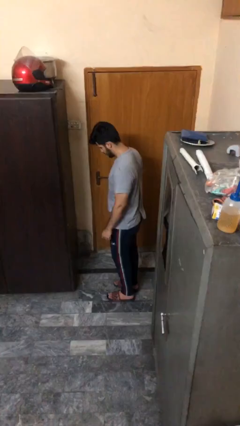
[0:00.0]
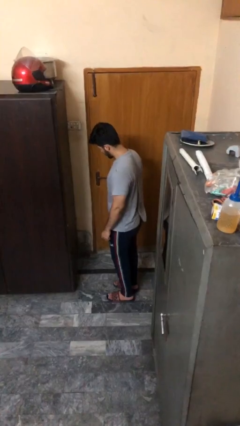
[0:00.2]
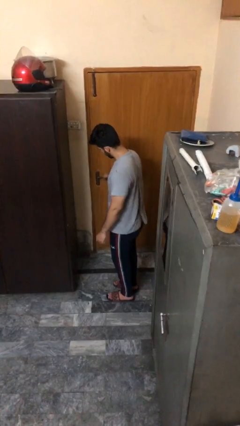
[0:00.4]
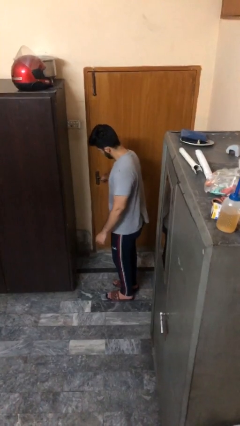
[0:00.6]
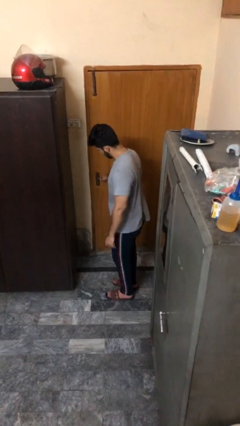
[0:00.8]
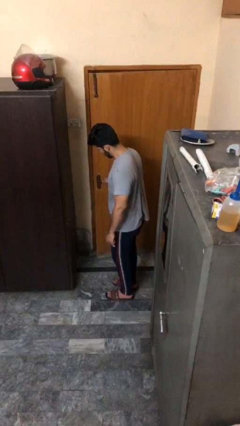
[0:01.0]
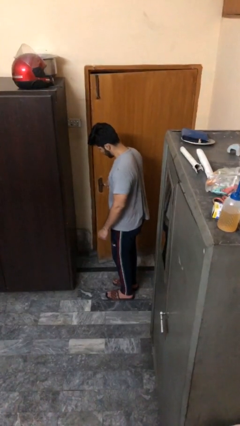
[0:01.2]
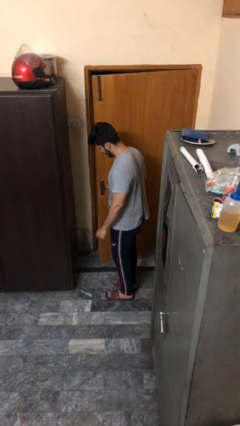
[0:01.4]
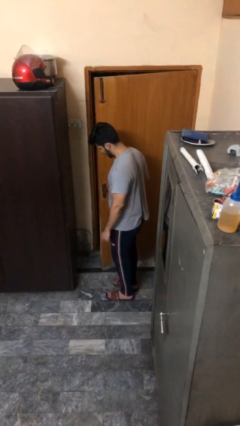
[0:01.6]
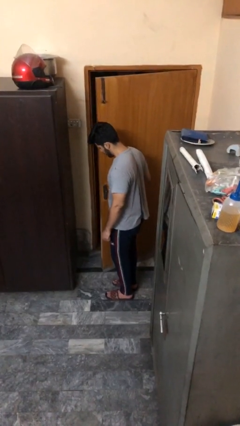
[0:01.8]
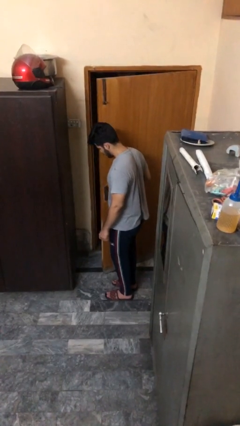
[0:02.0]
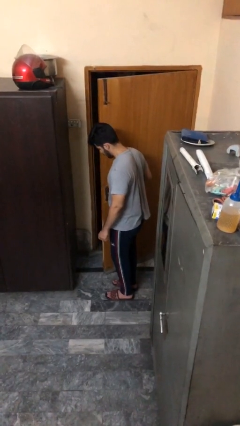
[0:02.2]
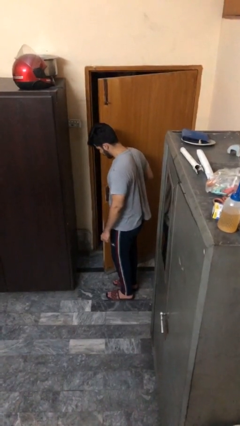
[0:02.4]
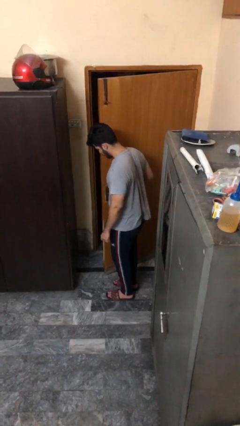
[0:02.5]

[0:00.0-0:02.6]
person opens facility door

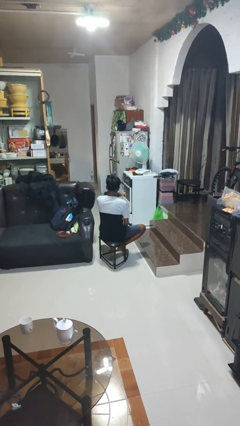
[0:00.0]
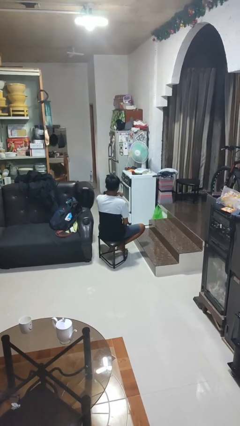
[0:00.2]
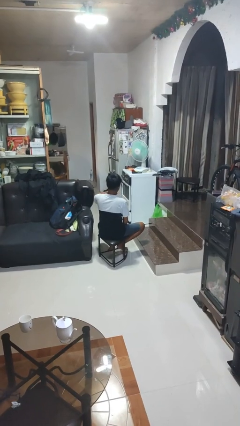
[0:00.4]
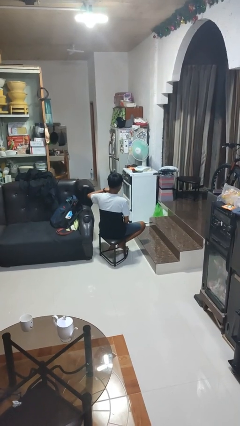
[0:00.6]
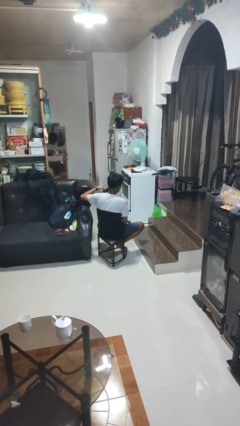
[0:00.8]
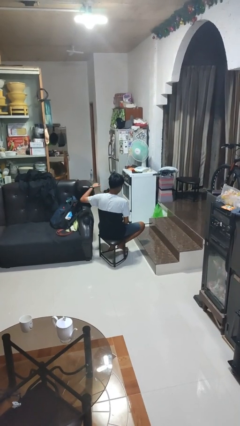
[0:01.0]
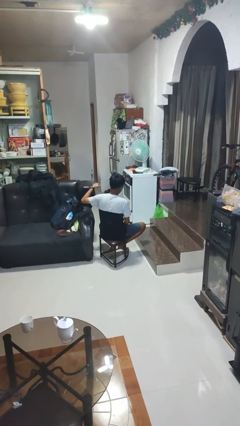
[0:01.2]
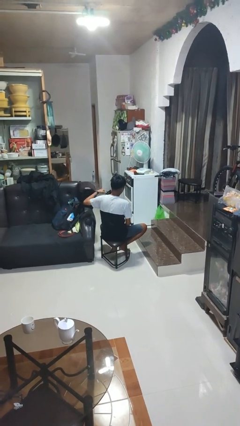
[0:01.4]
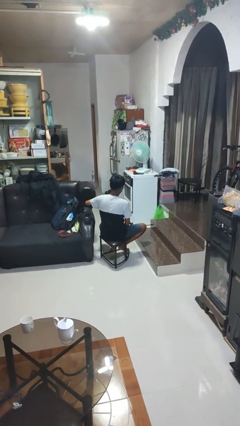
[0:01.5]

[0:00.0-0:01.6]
person gestures cut

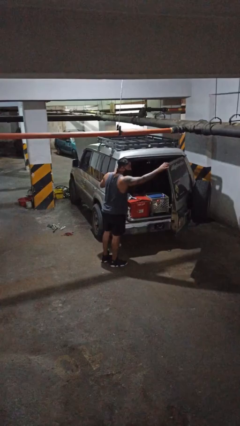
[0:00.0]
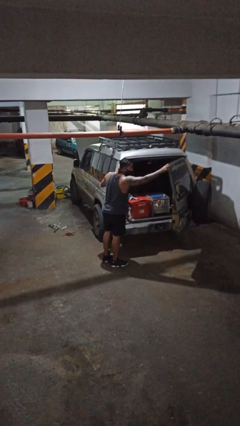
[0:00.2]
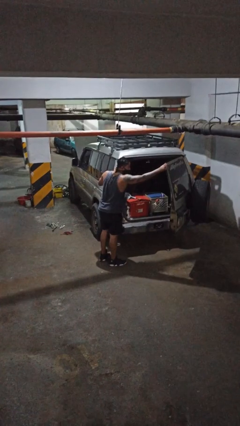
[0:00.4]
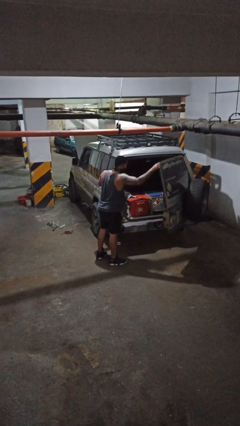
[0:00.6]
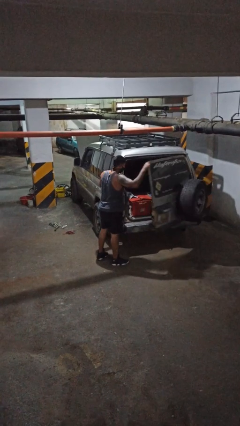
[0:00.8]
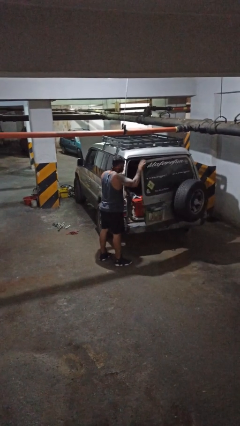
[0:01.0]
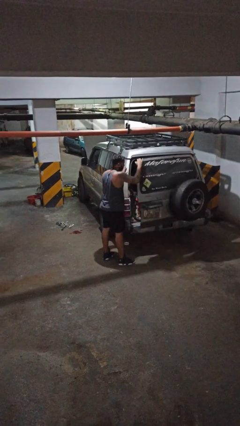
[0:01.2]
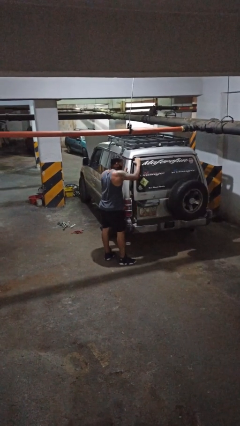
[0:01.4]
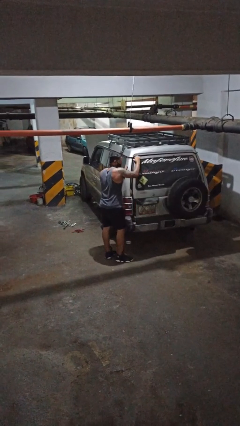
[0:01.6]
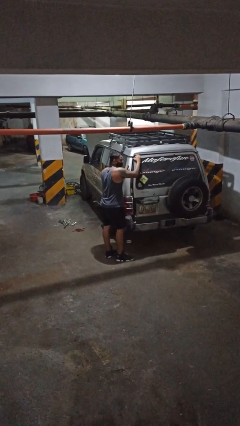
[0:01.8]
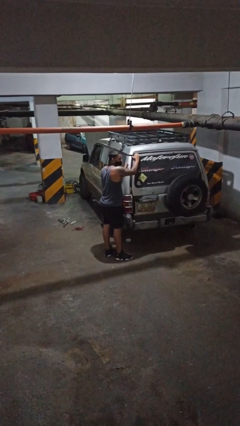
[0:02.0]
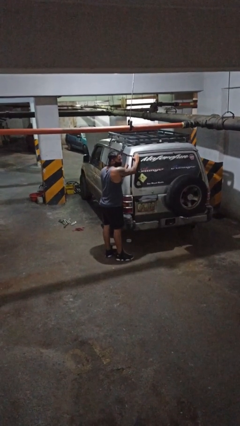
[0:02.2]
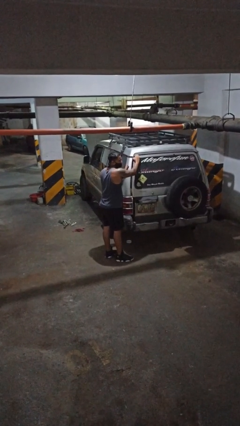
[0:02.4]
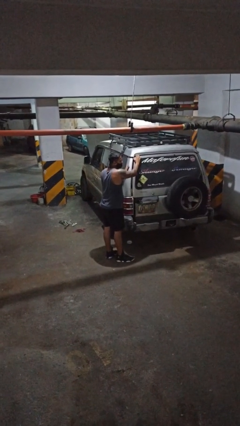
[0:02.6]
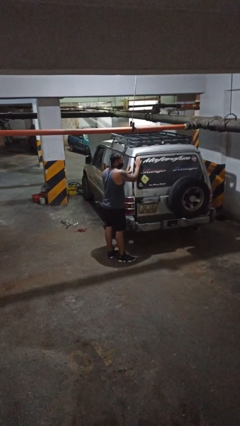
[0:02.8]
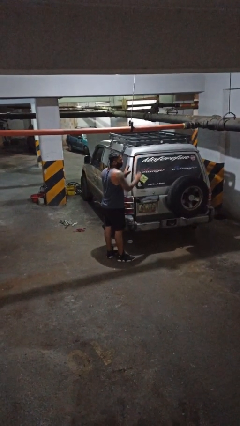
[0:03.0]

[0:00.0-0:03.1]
person closes car trunk

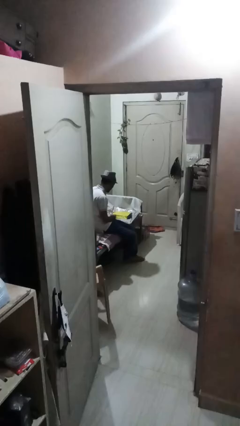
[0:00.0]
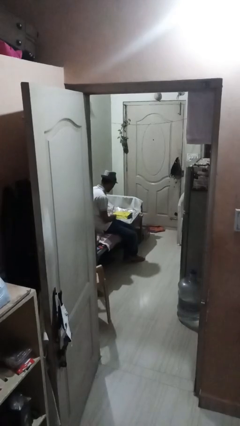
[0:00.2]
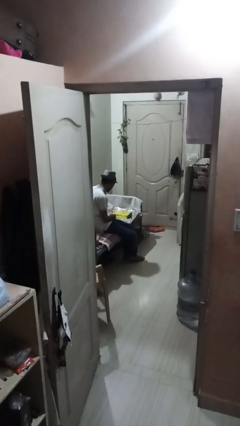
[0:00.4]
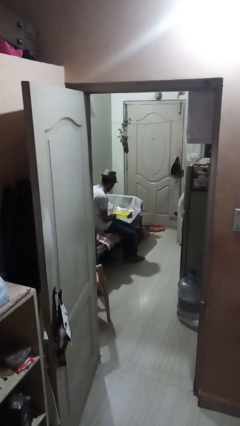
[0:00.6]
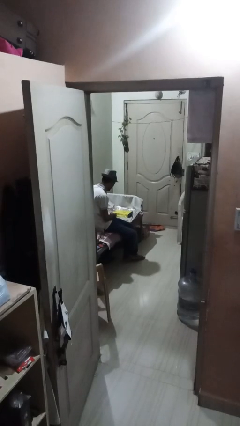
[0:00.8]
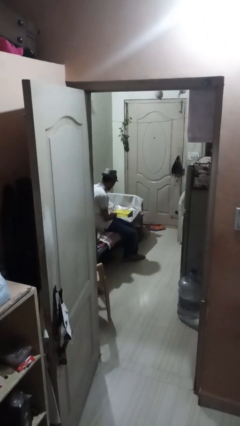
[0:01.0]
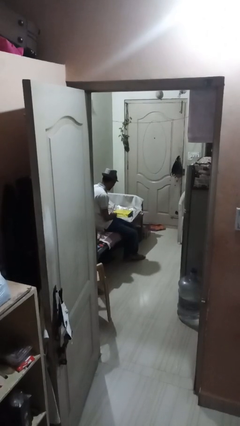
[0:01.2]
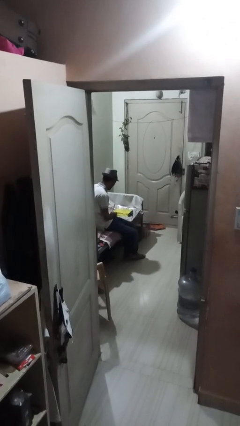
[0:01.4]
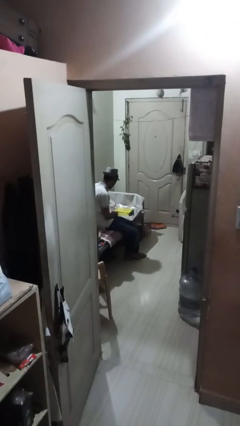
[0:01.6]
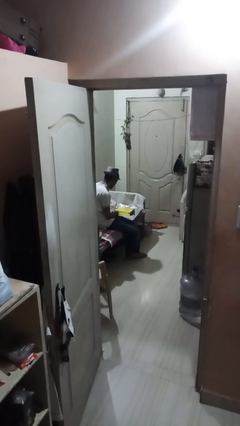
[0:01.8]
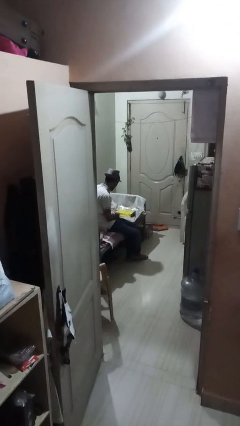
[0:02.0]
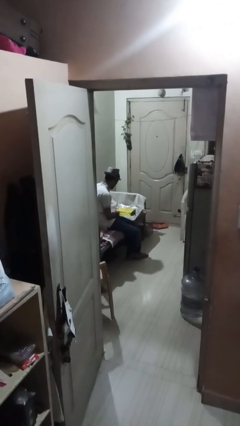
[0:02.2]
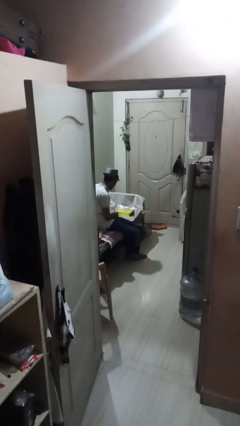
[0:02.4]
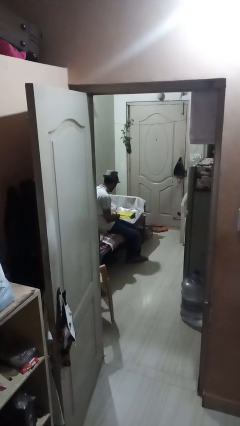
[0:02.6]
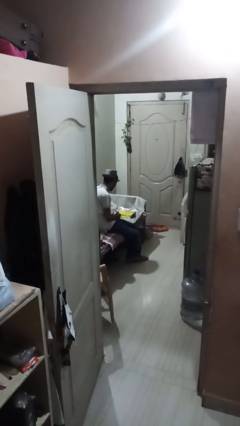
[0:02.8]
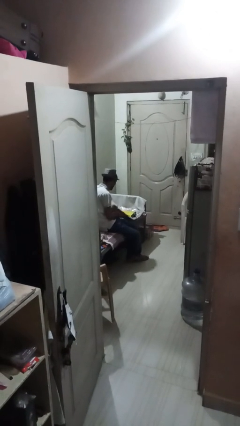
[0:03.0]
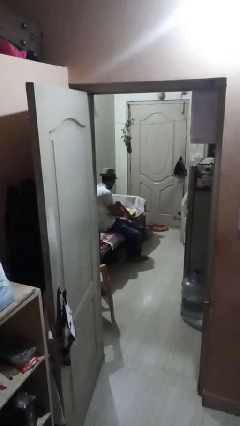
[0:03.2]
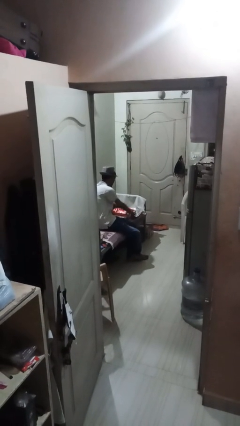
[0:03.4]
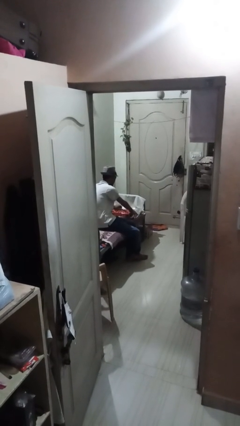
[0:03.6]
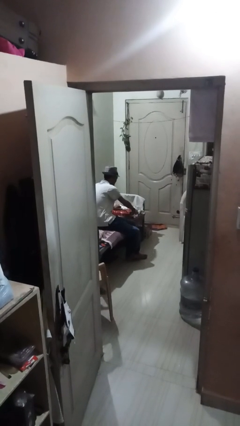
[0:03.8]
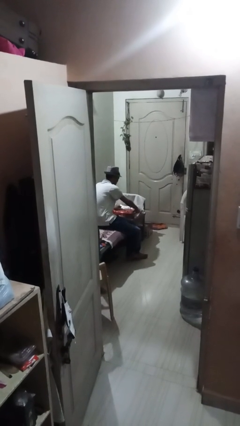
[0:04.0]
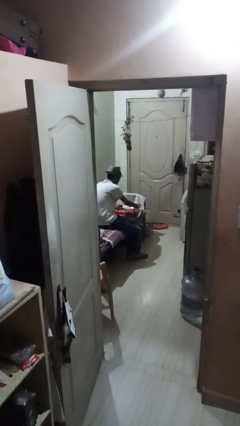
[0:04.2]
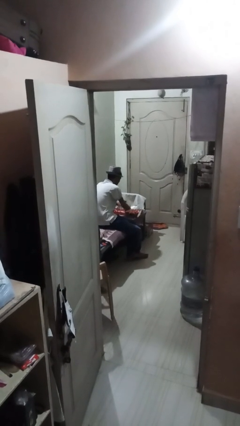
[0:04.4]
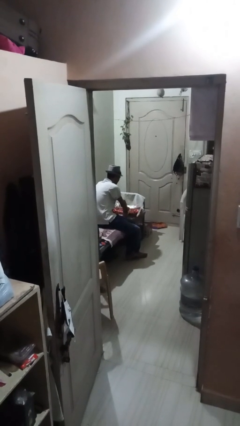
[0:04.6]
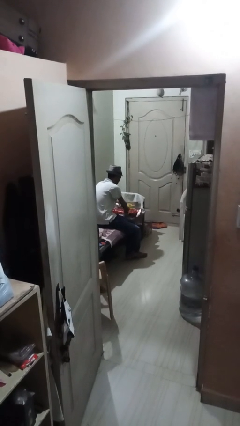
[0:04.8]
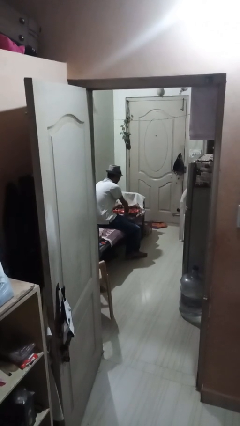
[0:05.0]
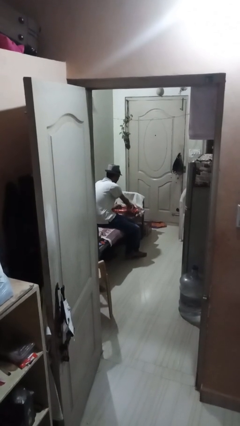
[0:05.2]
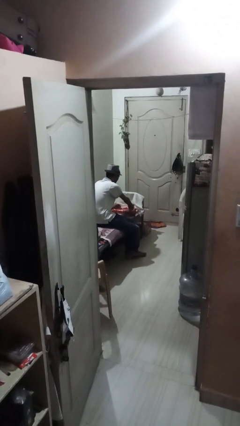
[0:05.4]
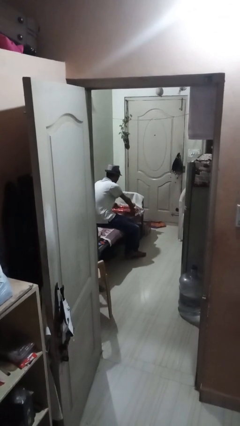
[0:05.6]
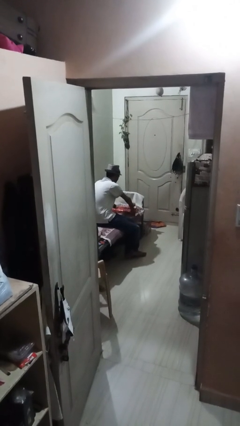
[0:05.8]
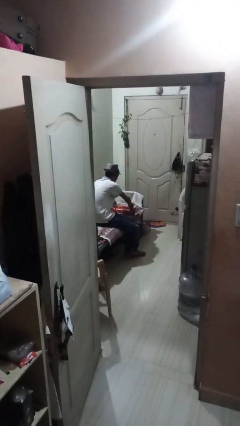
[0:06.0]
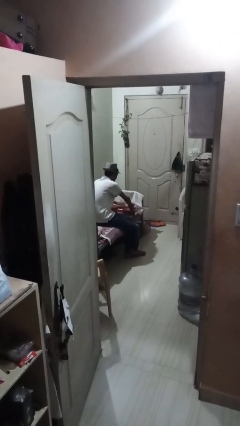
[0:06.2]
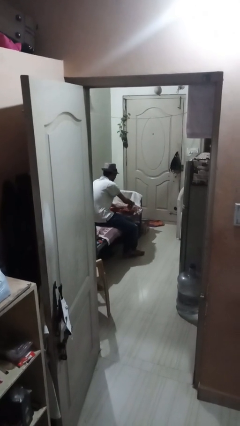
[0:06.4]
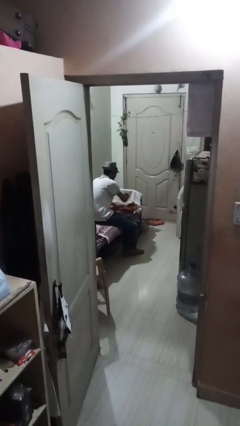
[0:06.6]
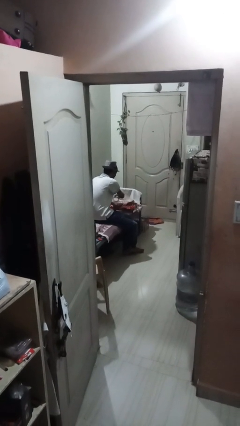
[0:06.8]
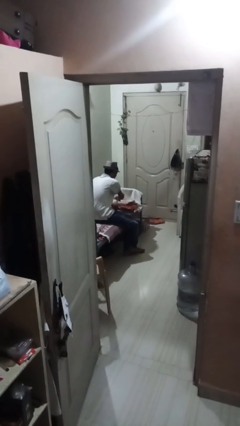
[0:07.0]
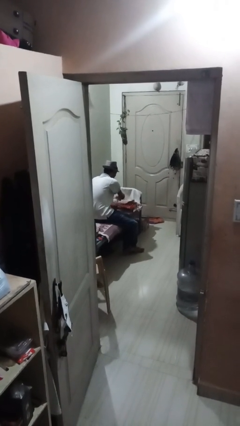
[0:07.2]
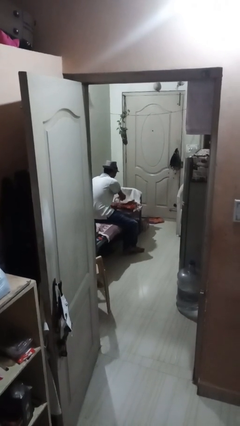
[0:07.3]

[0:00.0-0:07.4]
person wraps box

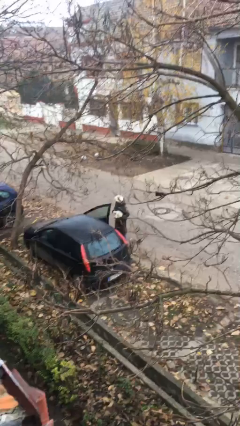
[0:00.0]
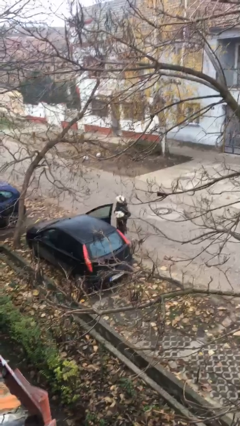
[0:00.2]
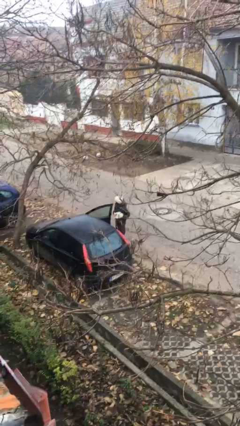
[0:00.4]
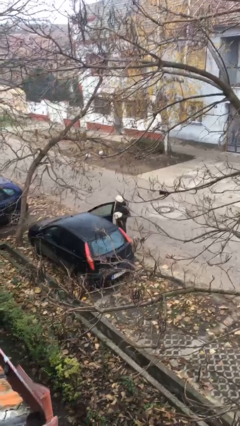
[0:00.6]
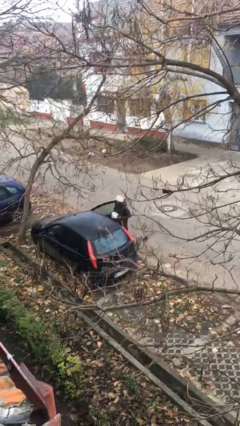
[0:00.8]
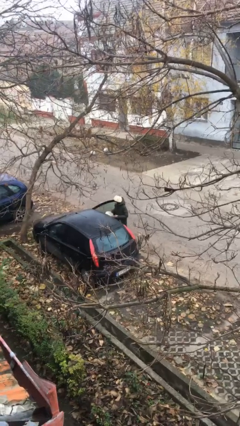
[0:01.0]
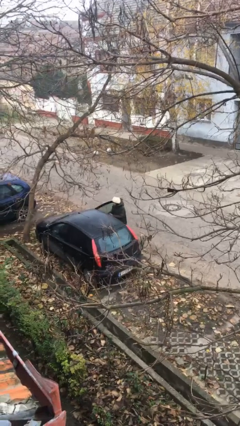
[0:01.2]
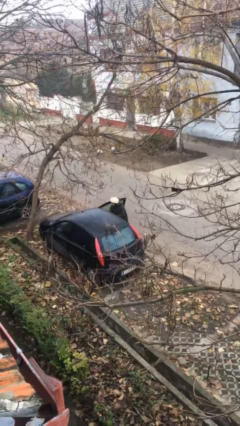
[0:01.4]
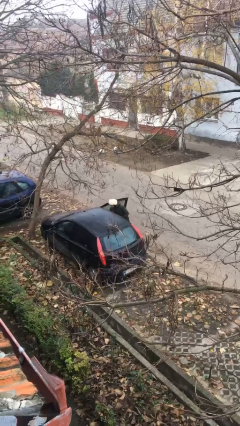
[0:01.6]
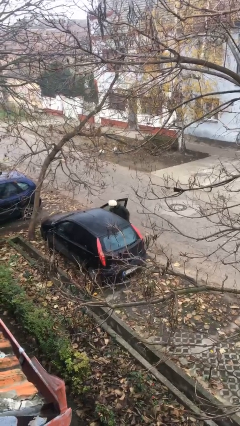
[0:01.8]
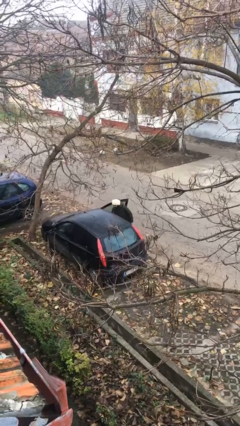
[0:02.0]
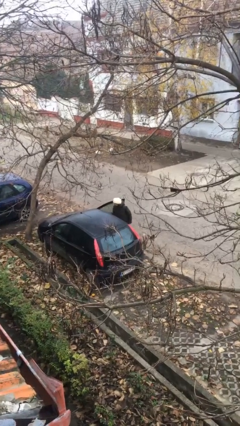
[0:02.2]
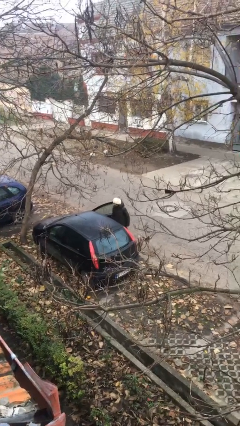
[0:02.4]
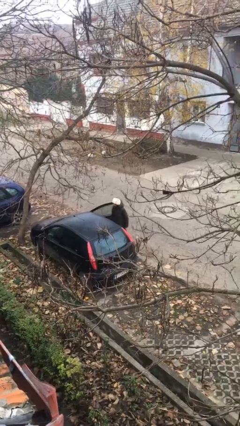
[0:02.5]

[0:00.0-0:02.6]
person loads car

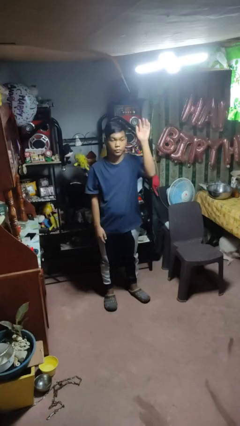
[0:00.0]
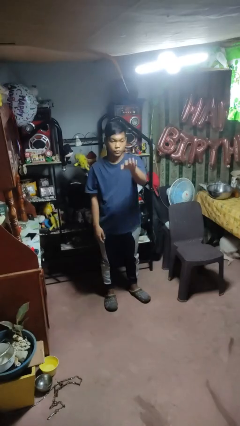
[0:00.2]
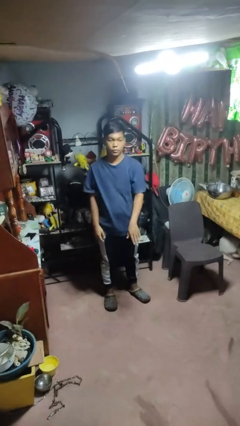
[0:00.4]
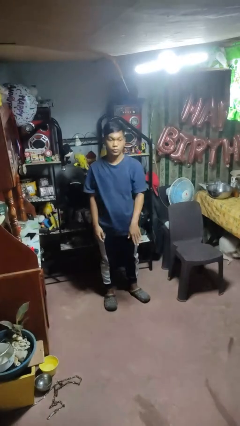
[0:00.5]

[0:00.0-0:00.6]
person gestures swipe down
